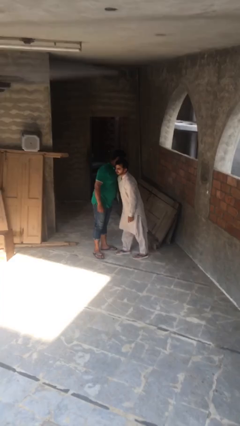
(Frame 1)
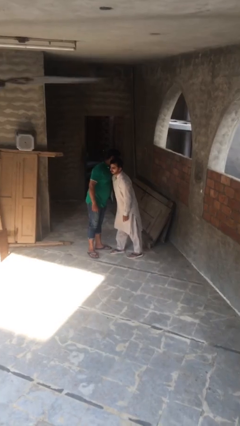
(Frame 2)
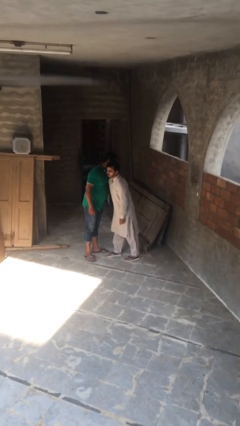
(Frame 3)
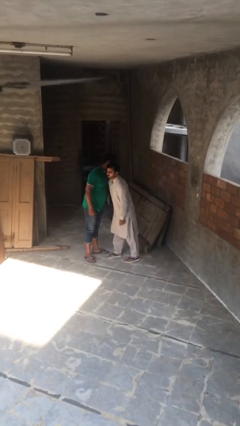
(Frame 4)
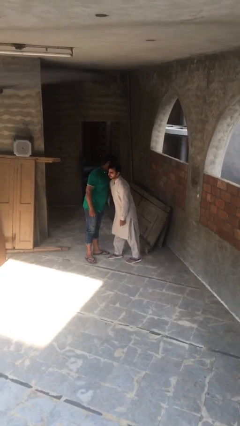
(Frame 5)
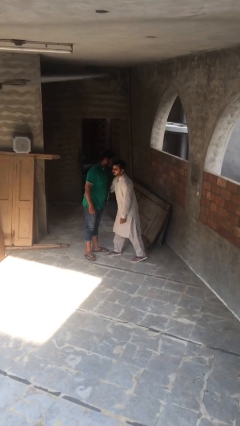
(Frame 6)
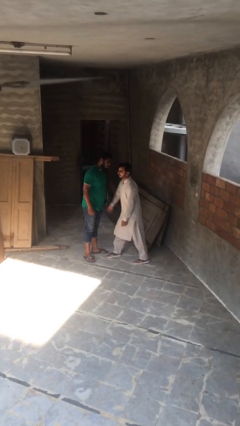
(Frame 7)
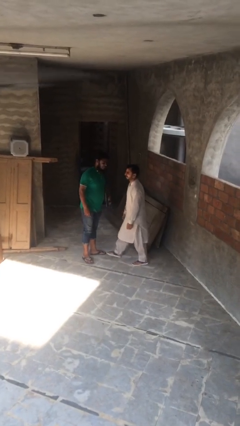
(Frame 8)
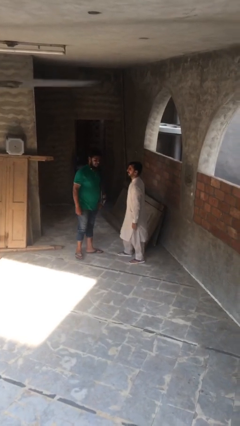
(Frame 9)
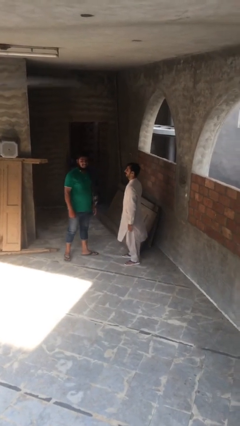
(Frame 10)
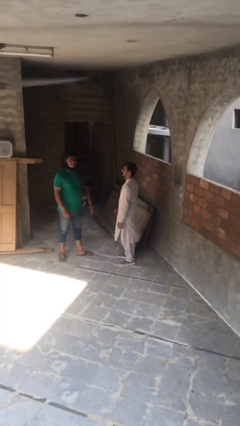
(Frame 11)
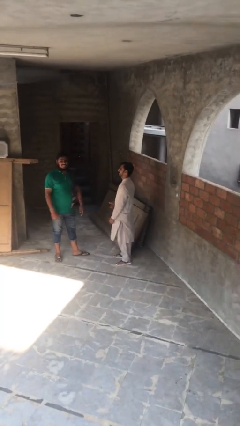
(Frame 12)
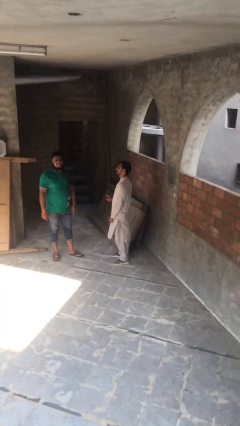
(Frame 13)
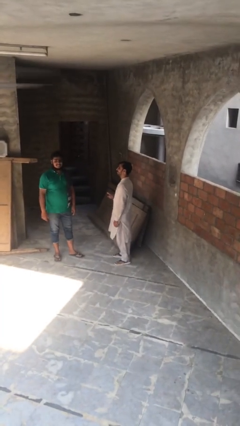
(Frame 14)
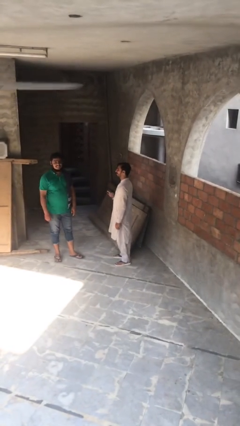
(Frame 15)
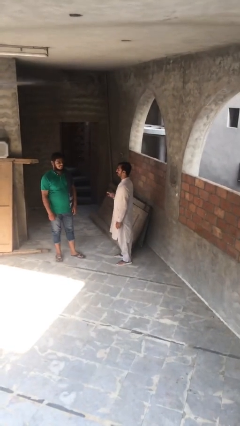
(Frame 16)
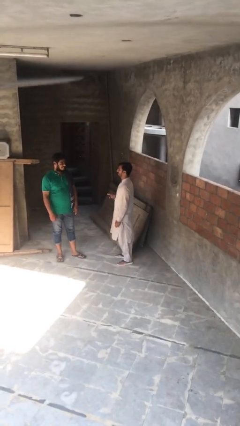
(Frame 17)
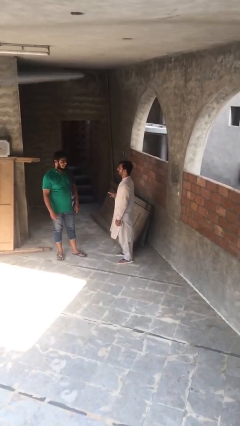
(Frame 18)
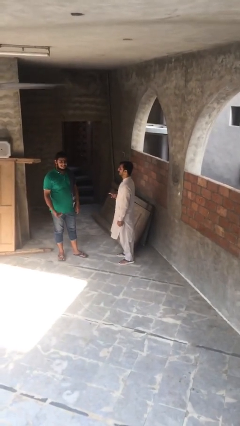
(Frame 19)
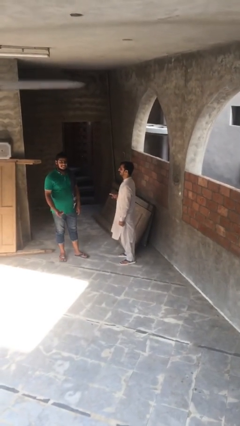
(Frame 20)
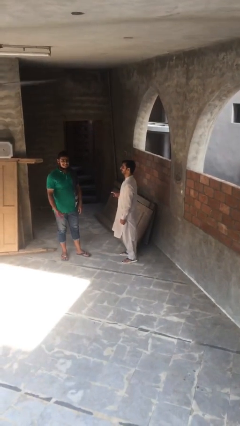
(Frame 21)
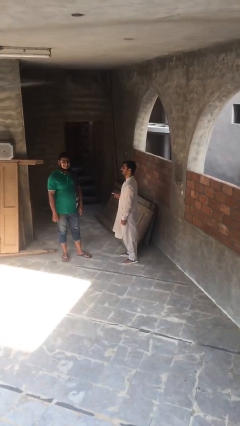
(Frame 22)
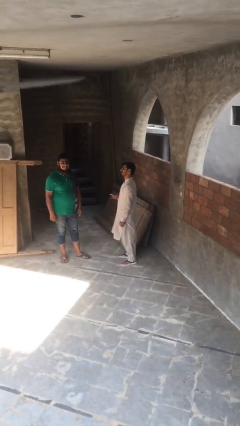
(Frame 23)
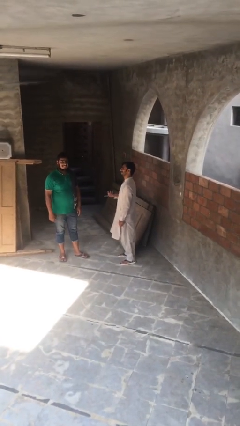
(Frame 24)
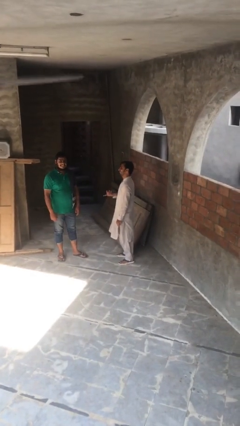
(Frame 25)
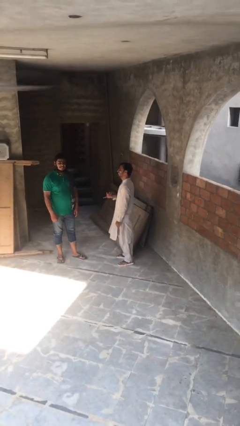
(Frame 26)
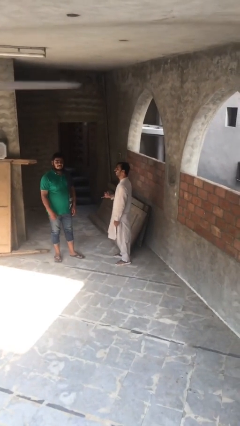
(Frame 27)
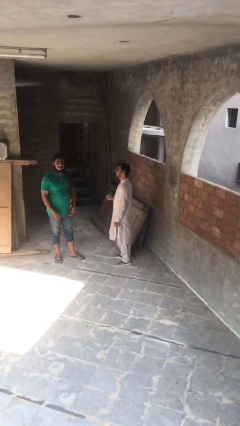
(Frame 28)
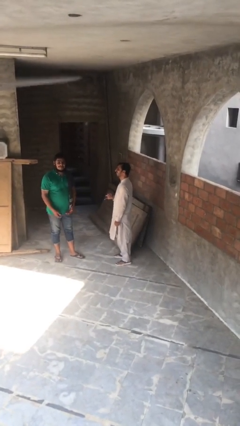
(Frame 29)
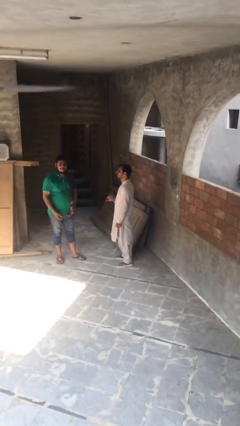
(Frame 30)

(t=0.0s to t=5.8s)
person talks to person

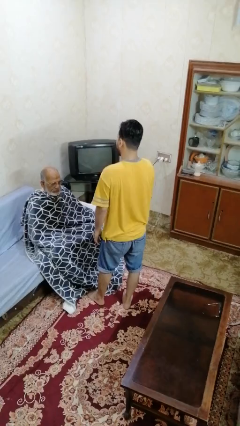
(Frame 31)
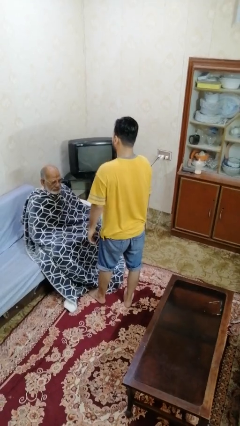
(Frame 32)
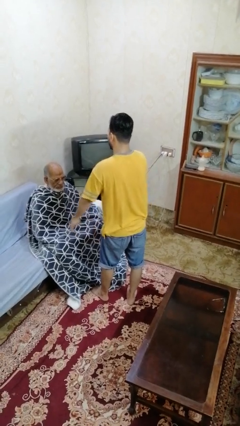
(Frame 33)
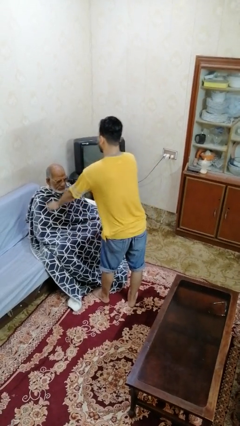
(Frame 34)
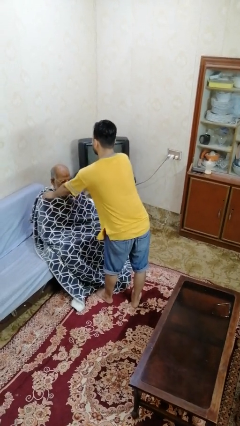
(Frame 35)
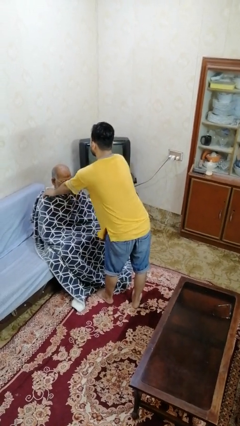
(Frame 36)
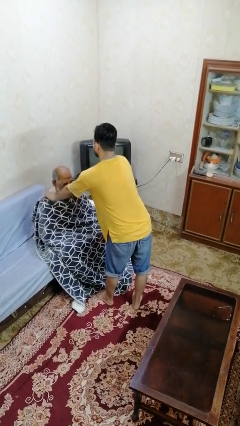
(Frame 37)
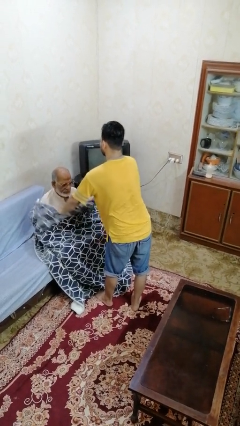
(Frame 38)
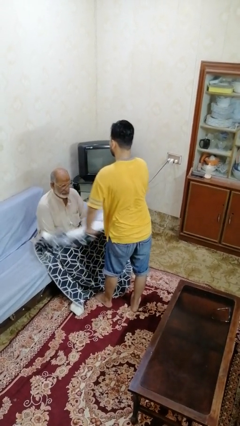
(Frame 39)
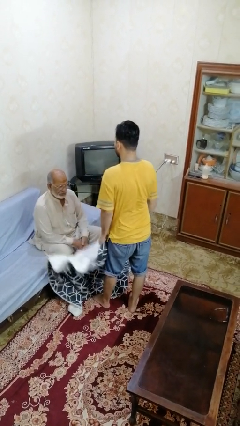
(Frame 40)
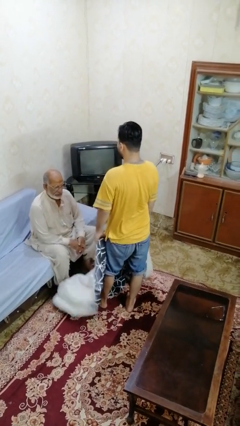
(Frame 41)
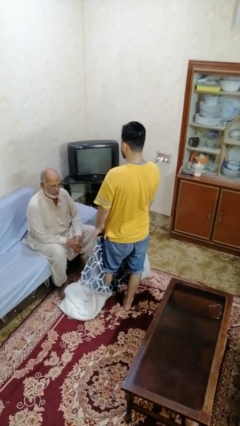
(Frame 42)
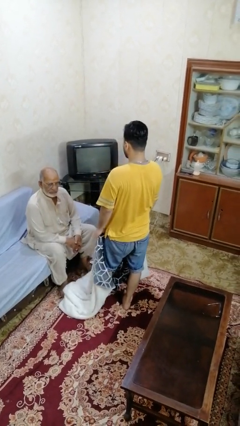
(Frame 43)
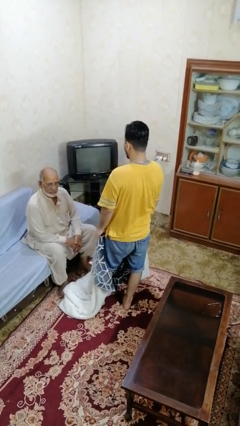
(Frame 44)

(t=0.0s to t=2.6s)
person uncovers friend with blanket

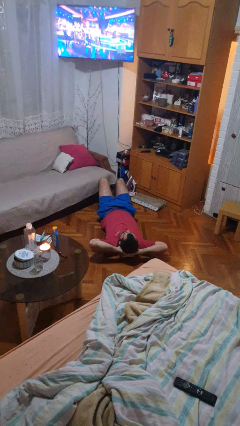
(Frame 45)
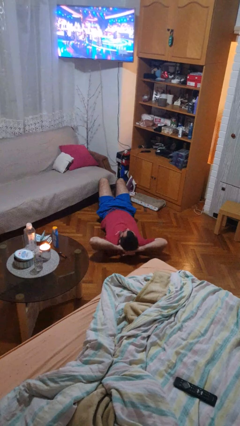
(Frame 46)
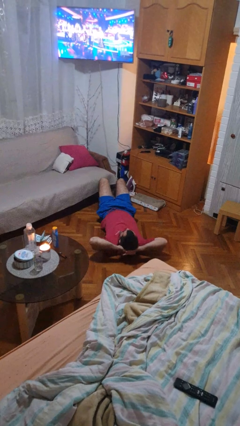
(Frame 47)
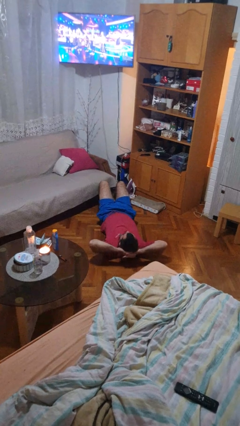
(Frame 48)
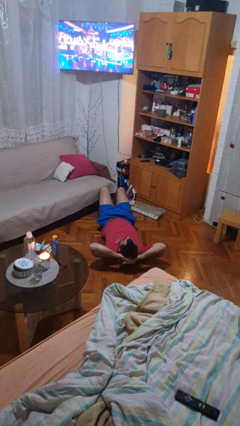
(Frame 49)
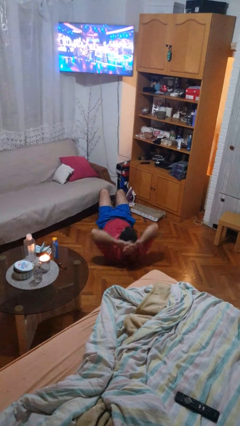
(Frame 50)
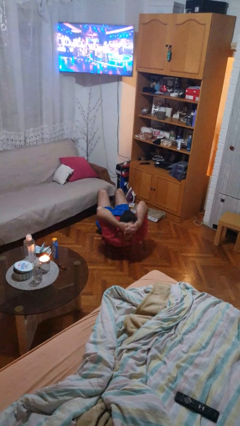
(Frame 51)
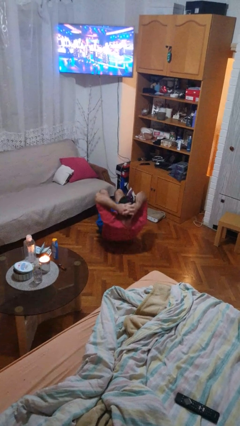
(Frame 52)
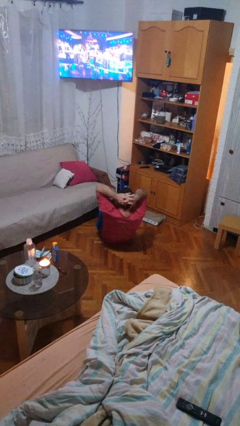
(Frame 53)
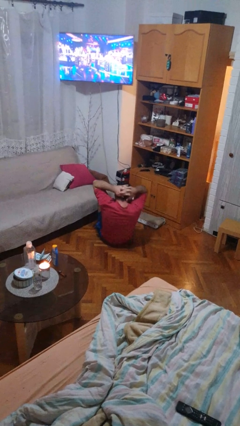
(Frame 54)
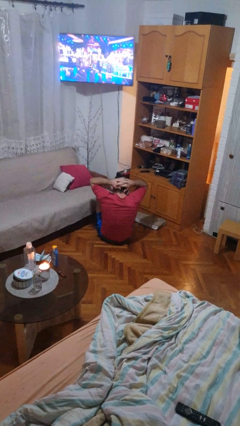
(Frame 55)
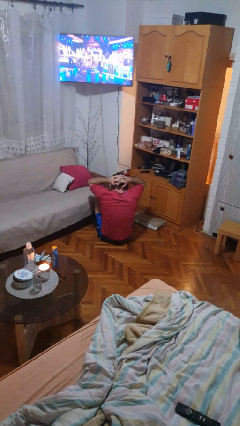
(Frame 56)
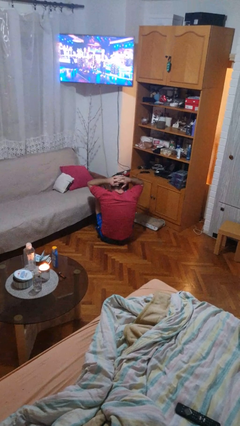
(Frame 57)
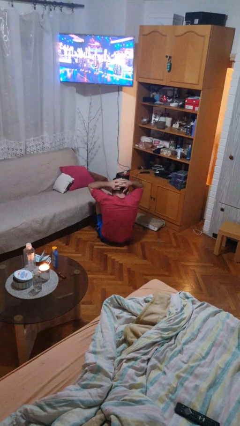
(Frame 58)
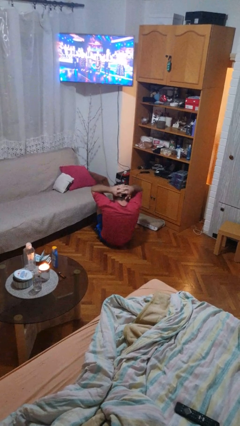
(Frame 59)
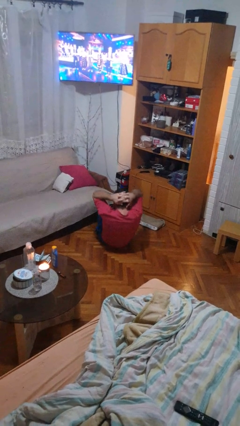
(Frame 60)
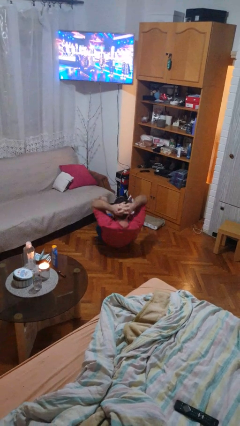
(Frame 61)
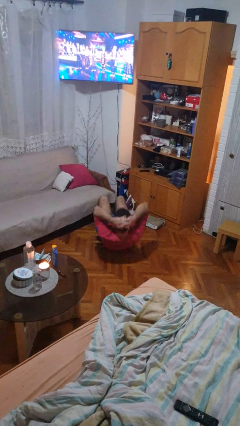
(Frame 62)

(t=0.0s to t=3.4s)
person exercises with situp

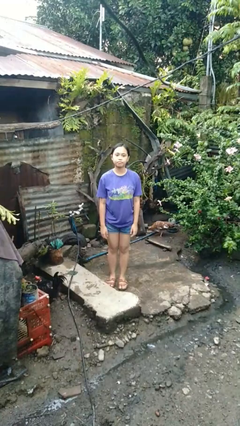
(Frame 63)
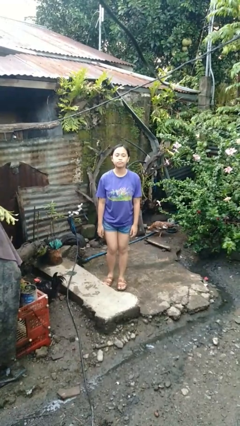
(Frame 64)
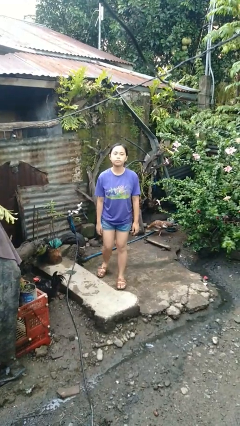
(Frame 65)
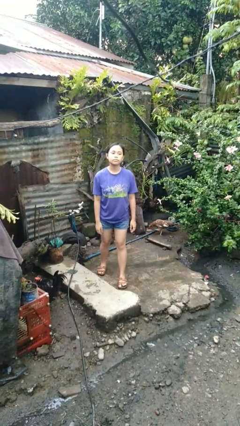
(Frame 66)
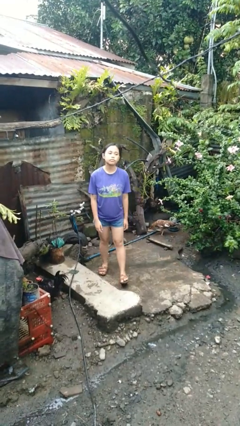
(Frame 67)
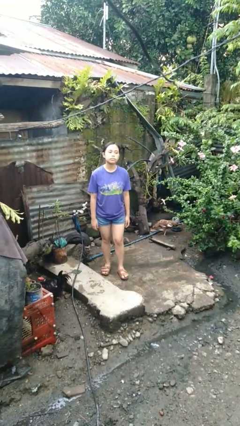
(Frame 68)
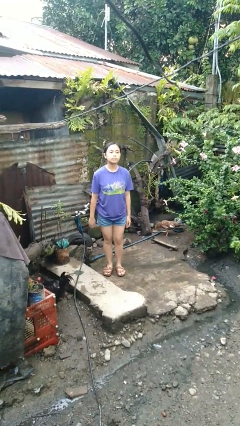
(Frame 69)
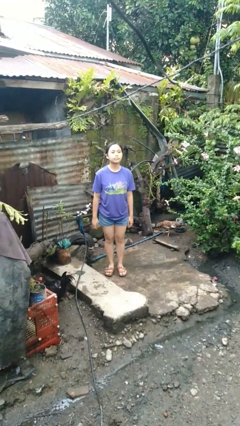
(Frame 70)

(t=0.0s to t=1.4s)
person shrugs

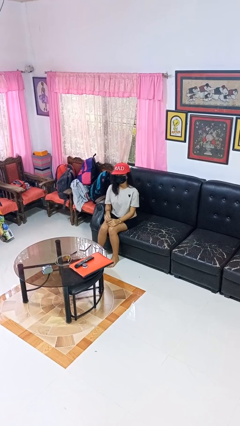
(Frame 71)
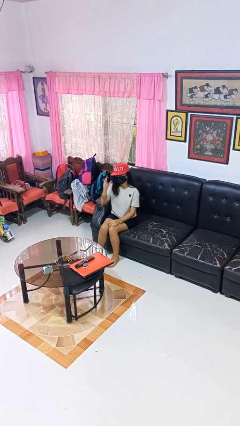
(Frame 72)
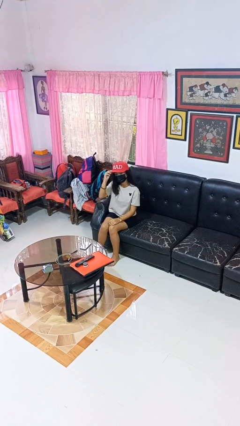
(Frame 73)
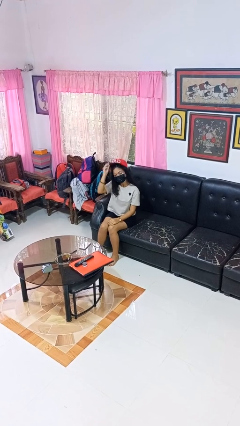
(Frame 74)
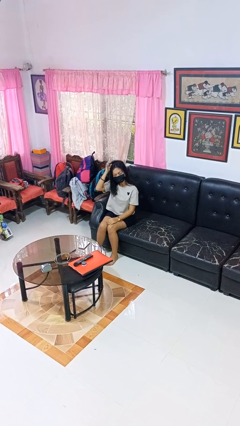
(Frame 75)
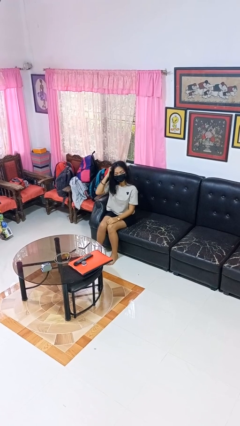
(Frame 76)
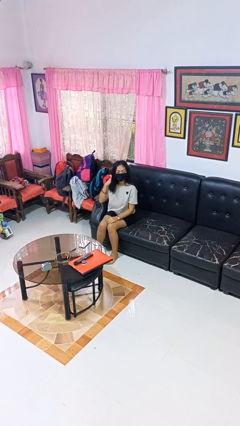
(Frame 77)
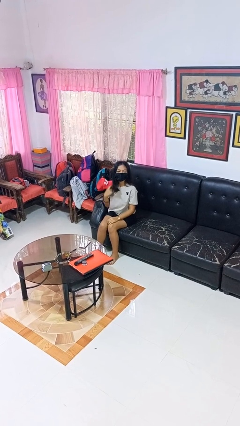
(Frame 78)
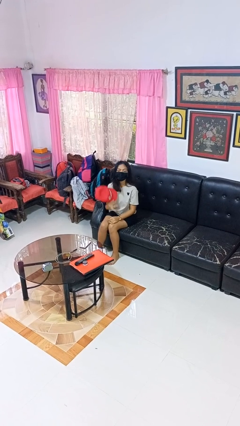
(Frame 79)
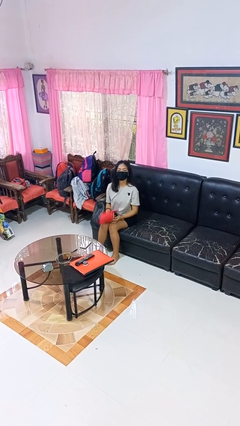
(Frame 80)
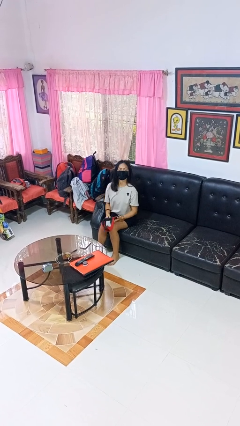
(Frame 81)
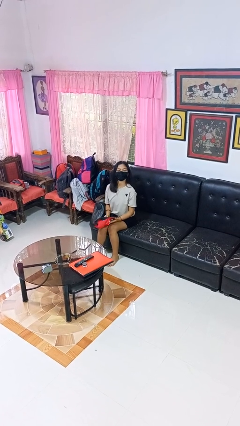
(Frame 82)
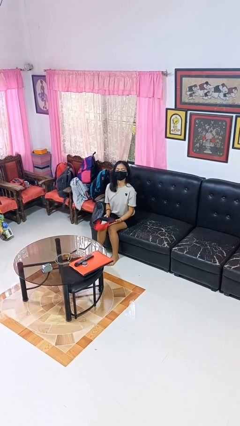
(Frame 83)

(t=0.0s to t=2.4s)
person takes off hat

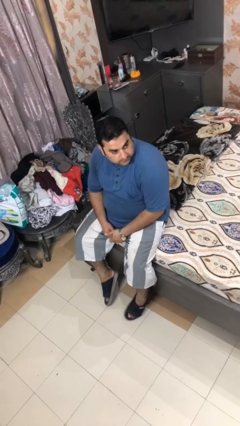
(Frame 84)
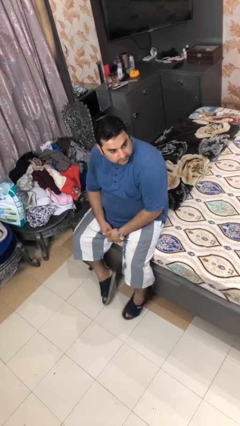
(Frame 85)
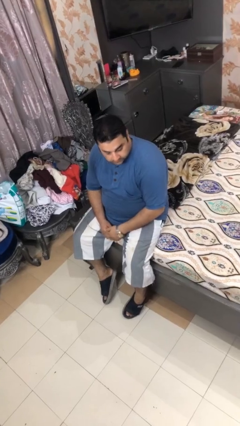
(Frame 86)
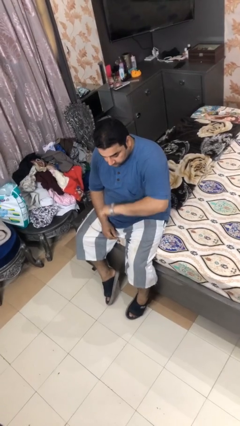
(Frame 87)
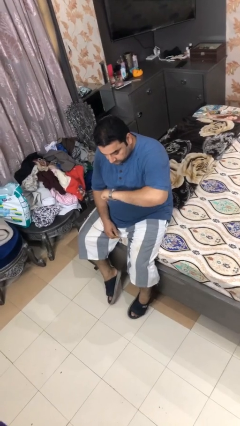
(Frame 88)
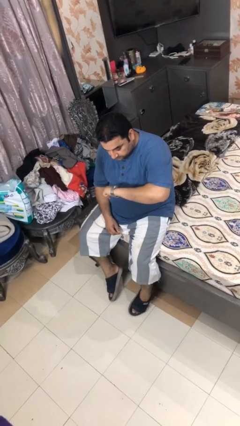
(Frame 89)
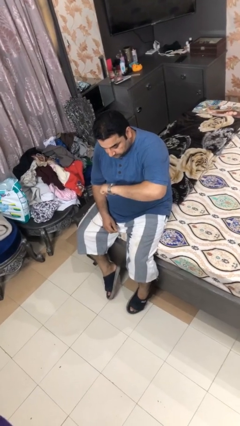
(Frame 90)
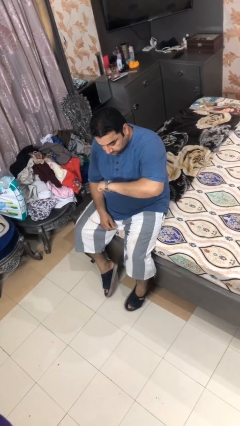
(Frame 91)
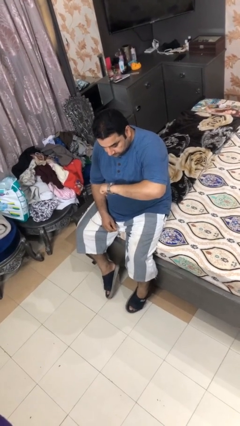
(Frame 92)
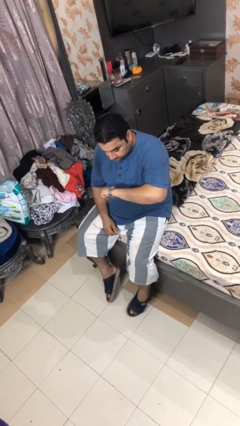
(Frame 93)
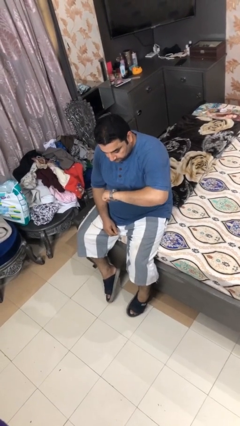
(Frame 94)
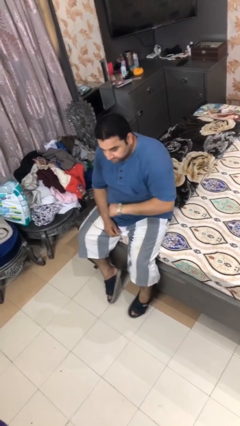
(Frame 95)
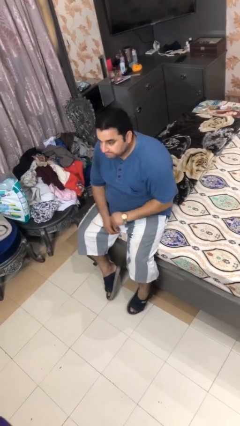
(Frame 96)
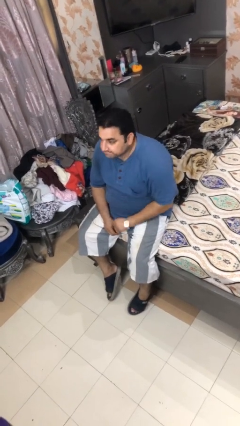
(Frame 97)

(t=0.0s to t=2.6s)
person looks at wristwatch
